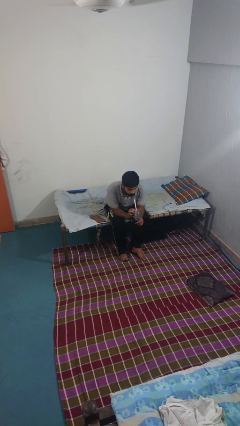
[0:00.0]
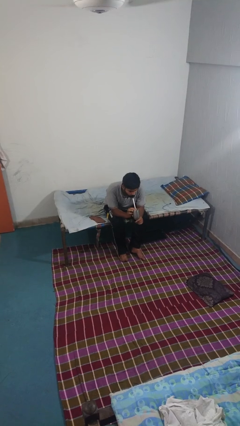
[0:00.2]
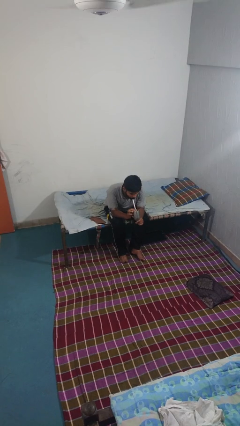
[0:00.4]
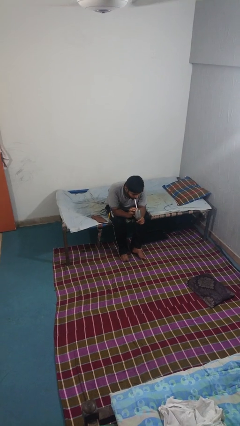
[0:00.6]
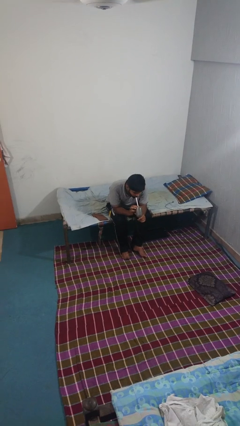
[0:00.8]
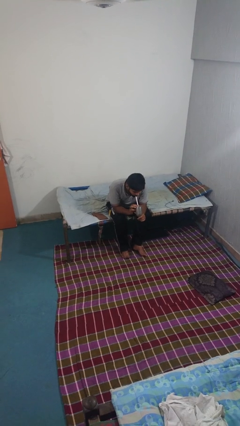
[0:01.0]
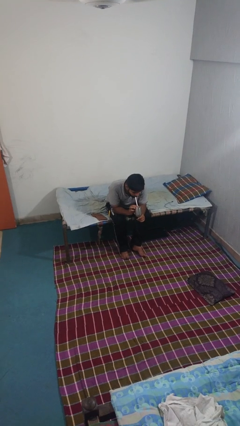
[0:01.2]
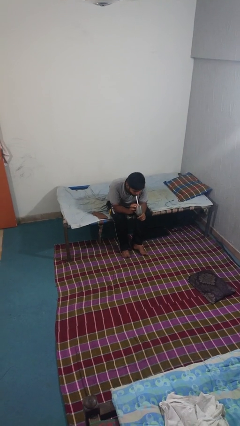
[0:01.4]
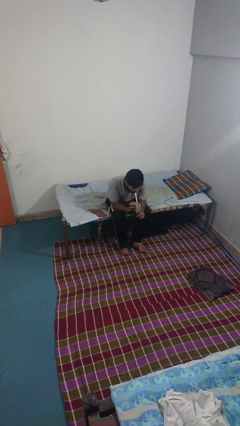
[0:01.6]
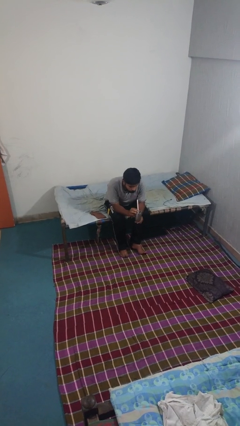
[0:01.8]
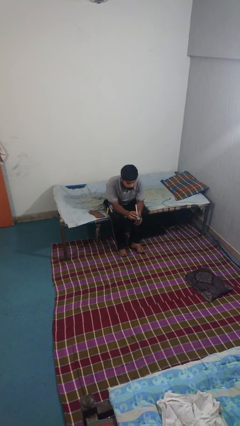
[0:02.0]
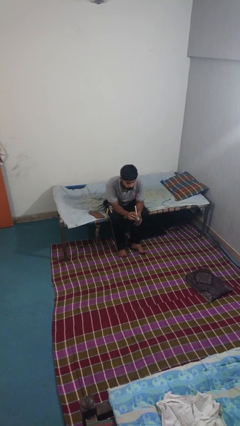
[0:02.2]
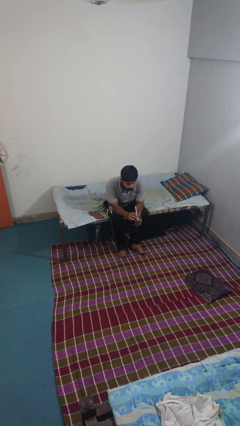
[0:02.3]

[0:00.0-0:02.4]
person drinks from straw

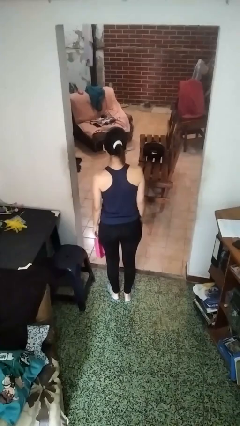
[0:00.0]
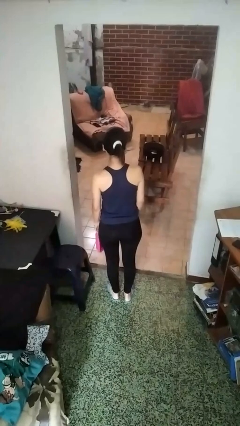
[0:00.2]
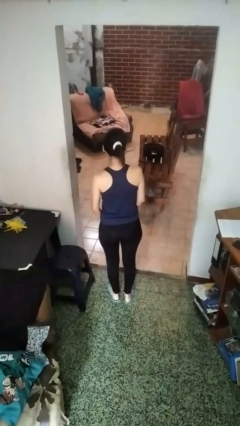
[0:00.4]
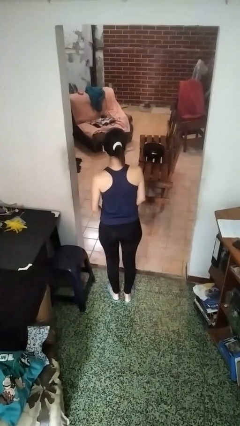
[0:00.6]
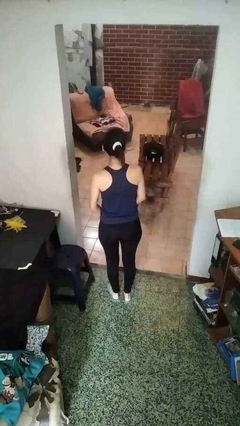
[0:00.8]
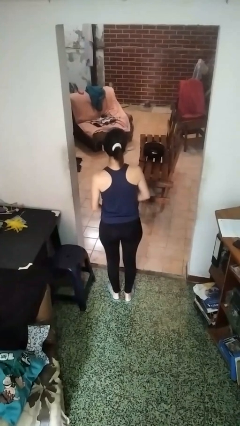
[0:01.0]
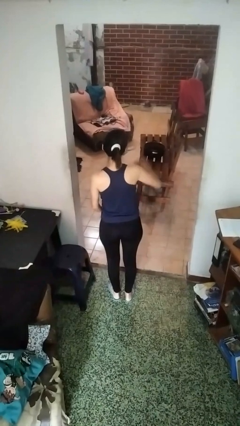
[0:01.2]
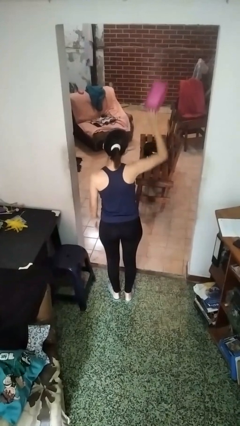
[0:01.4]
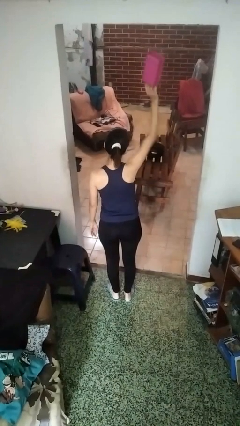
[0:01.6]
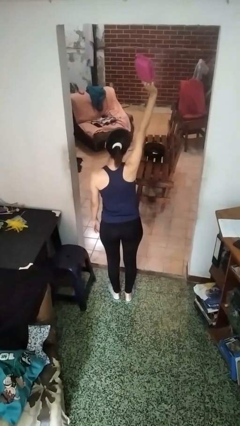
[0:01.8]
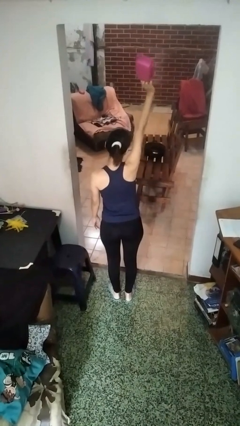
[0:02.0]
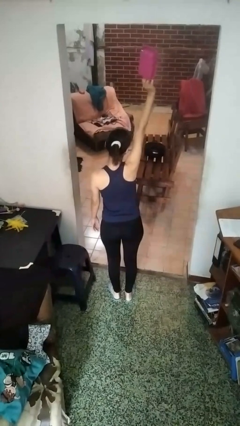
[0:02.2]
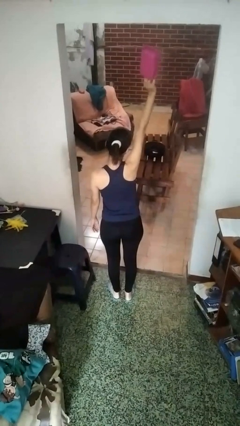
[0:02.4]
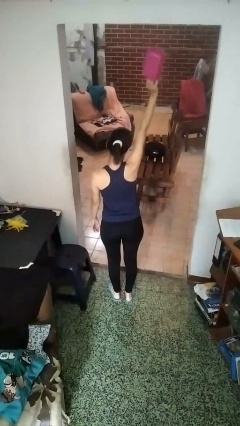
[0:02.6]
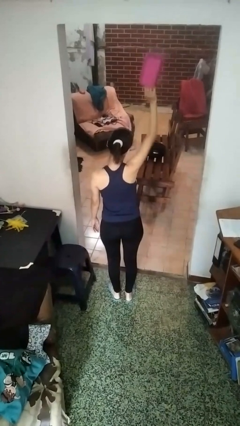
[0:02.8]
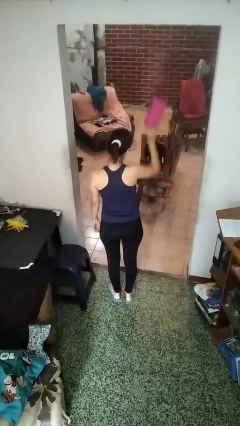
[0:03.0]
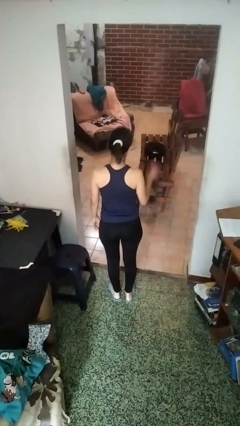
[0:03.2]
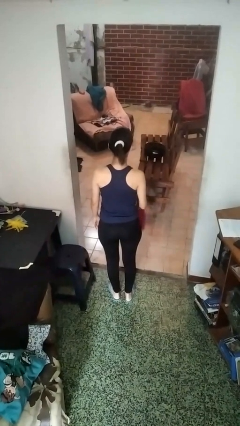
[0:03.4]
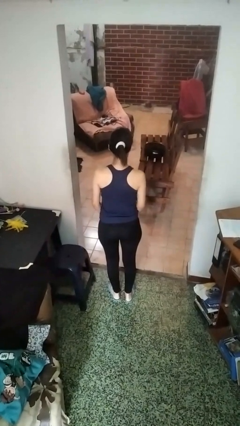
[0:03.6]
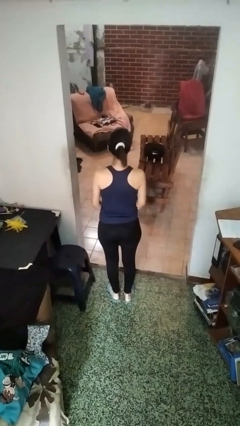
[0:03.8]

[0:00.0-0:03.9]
person holds object above head

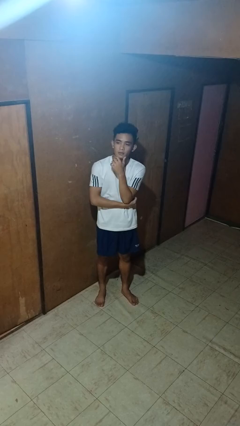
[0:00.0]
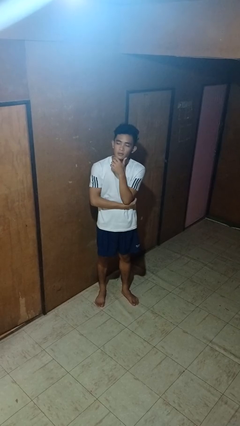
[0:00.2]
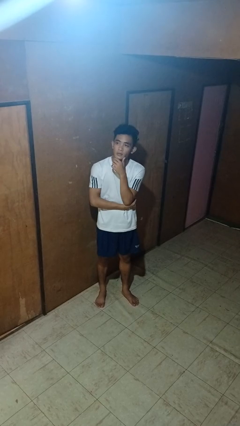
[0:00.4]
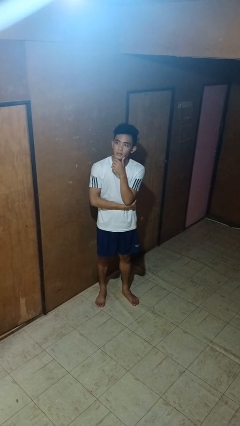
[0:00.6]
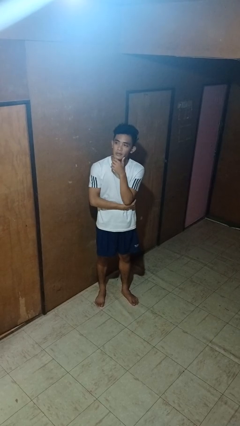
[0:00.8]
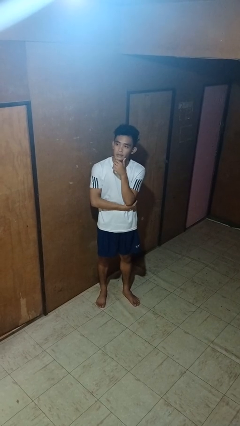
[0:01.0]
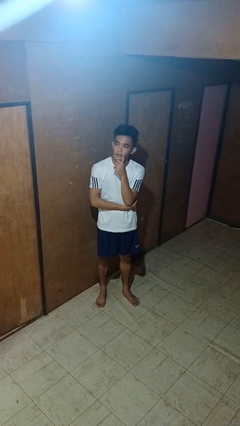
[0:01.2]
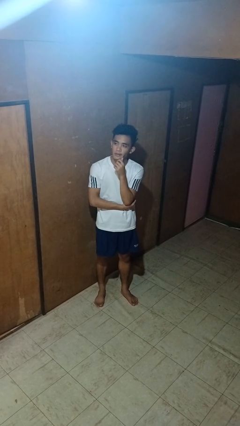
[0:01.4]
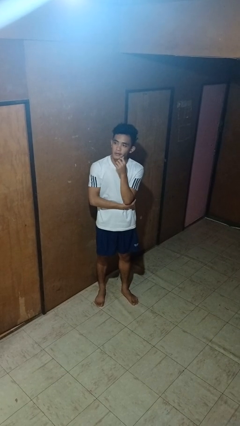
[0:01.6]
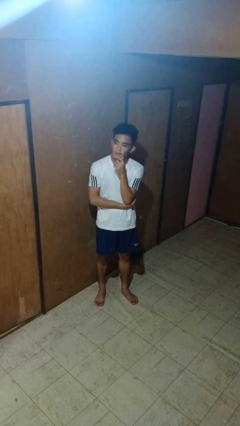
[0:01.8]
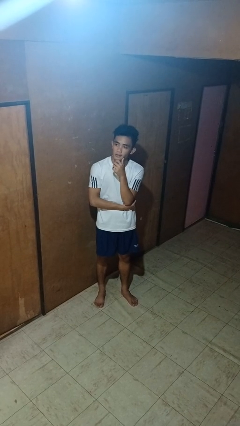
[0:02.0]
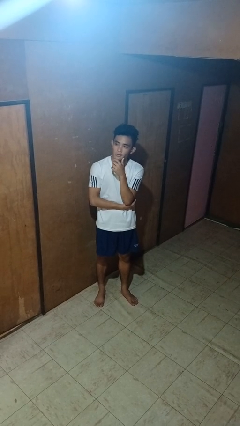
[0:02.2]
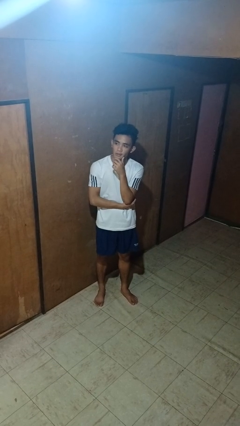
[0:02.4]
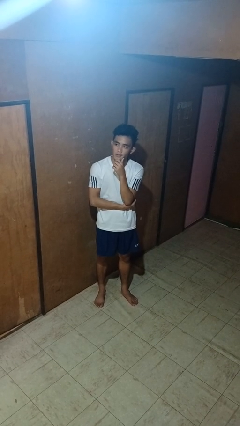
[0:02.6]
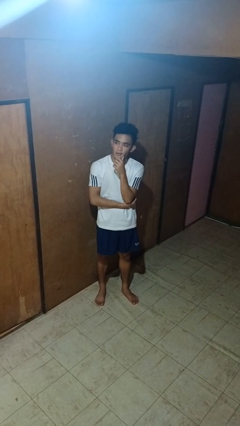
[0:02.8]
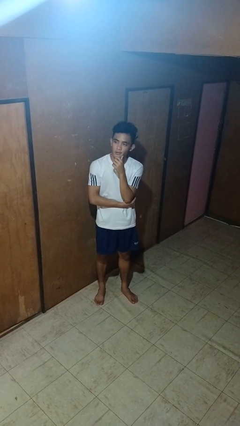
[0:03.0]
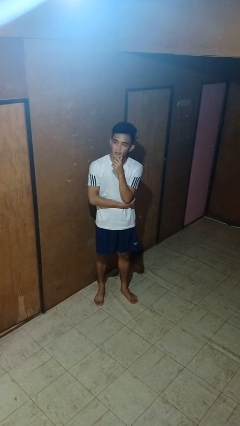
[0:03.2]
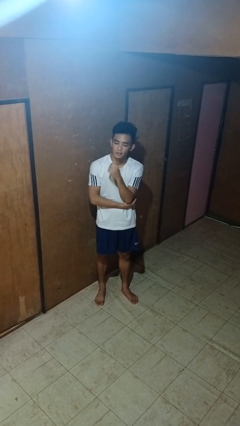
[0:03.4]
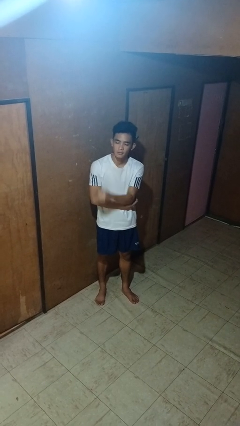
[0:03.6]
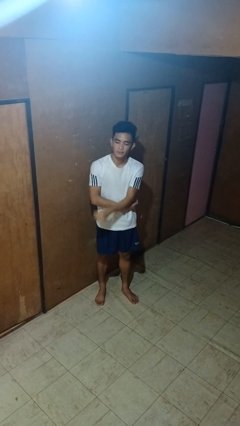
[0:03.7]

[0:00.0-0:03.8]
person strokes chin

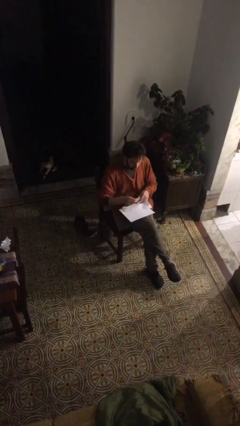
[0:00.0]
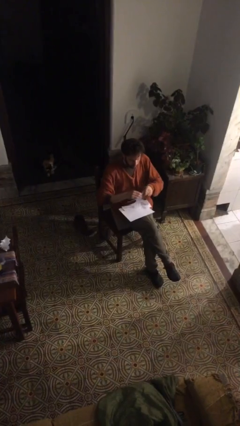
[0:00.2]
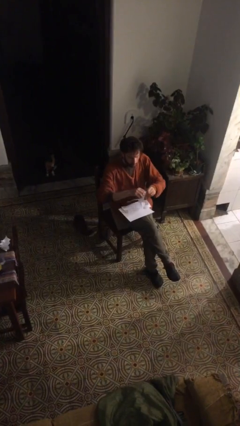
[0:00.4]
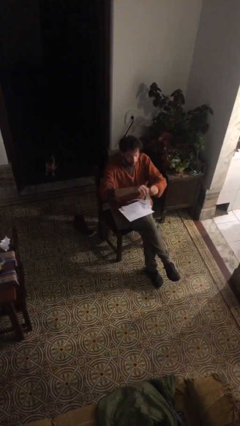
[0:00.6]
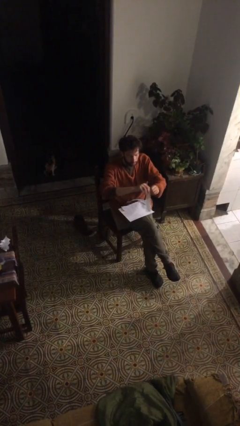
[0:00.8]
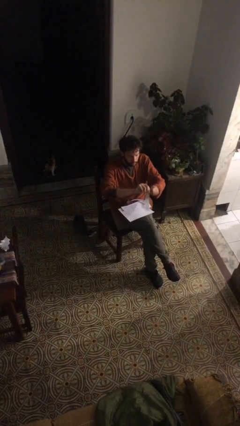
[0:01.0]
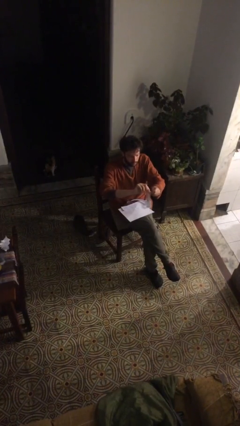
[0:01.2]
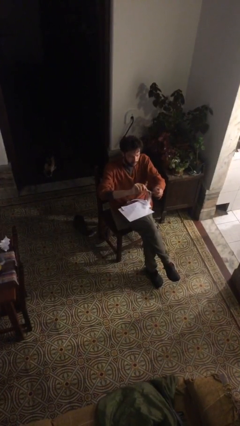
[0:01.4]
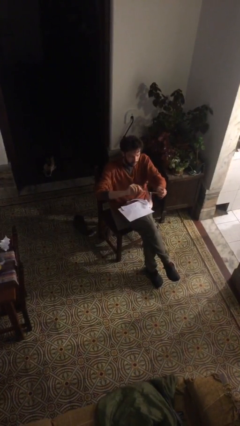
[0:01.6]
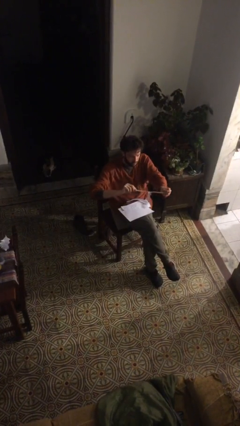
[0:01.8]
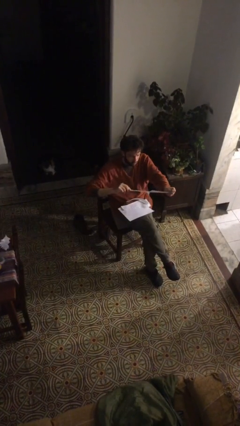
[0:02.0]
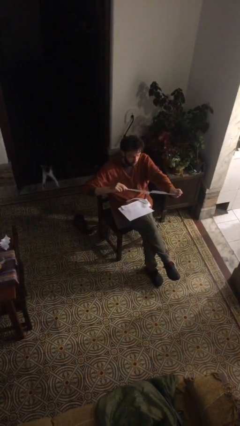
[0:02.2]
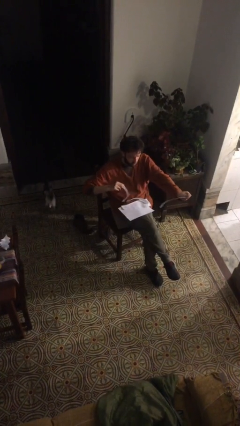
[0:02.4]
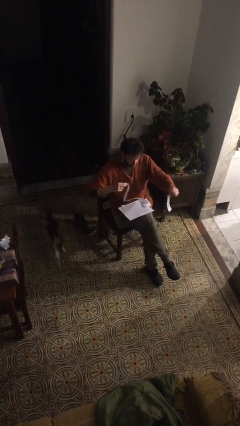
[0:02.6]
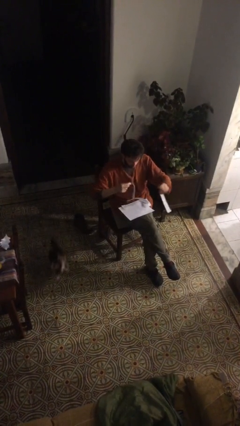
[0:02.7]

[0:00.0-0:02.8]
person tears paper

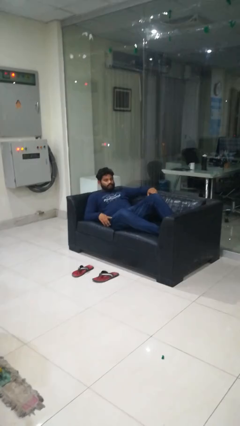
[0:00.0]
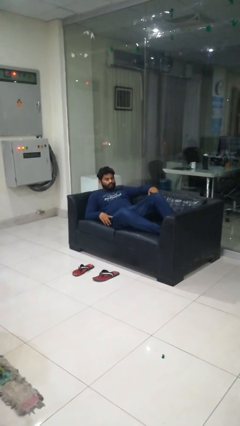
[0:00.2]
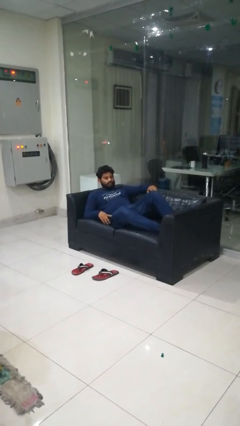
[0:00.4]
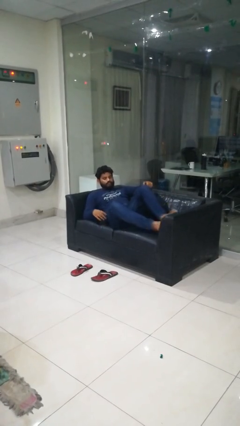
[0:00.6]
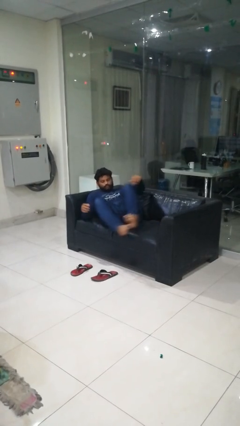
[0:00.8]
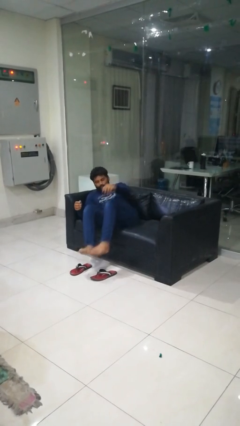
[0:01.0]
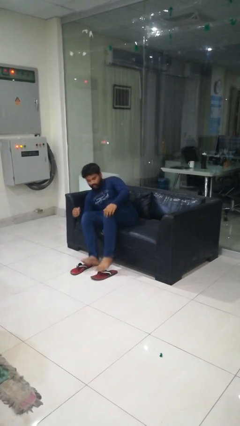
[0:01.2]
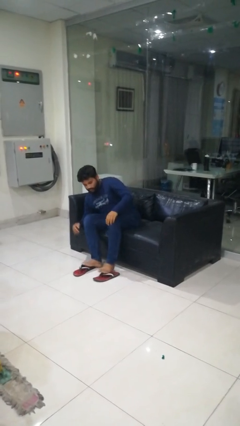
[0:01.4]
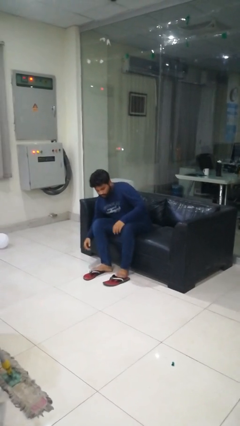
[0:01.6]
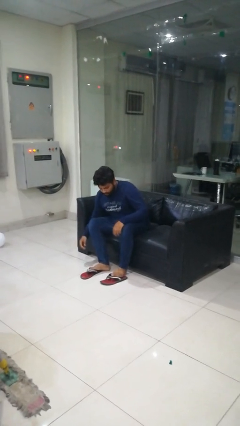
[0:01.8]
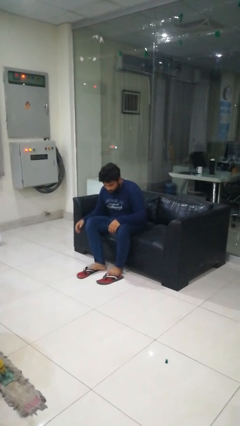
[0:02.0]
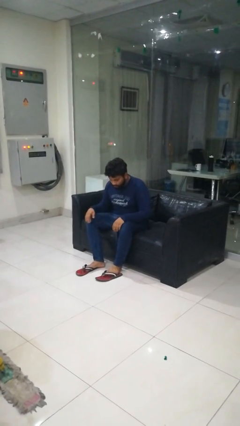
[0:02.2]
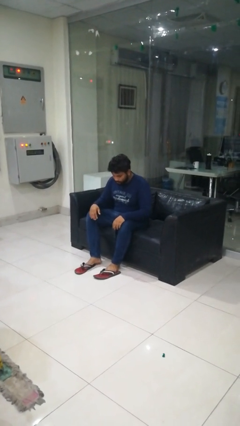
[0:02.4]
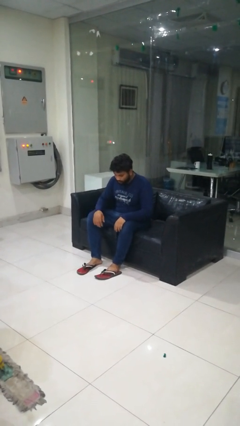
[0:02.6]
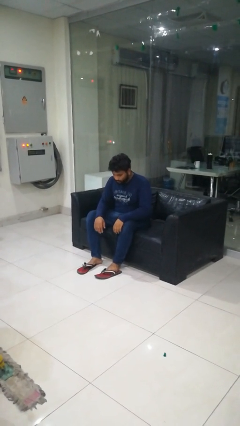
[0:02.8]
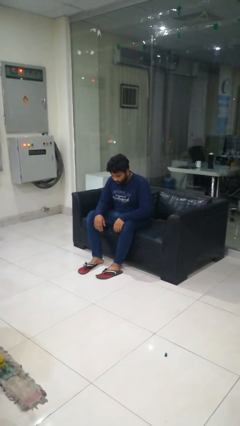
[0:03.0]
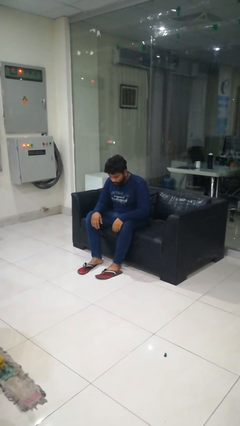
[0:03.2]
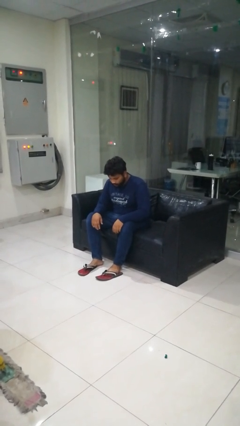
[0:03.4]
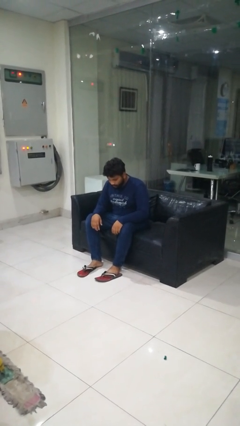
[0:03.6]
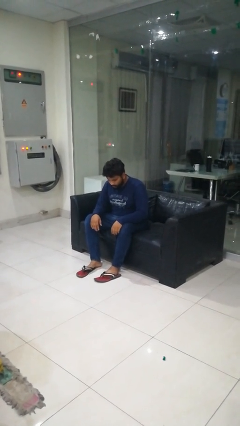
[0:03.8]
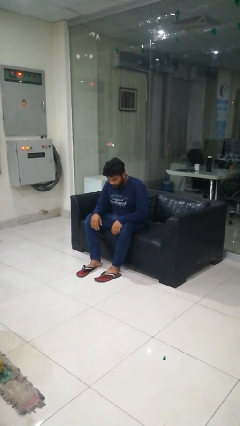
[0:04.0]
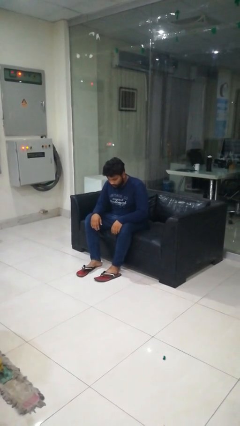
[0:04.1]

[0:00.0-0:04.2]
person stands up

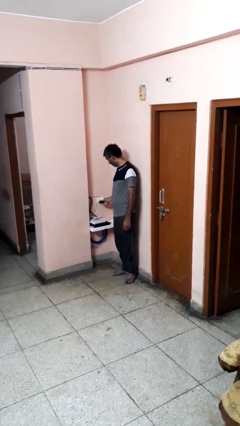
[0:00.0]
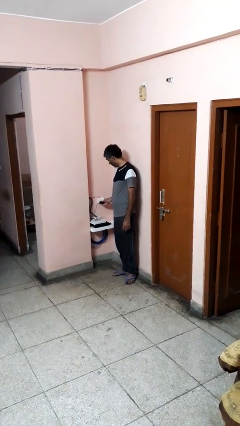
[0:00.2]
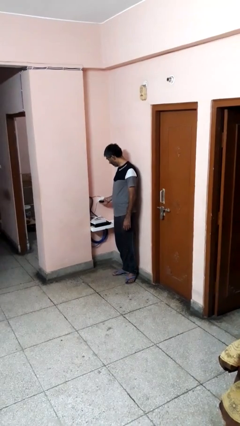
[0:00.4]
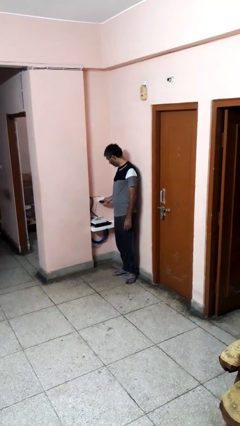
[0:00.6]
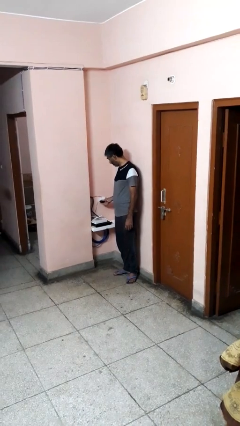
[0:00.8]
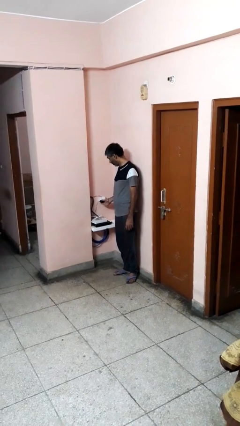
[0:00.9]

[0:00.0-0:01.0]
person plugs into electrical socket
